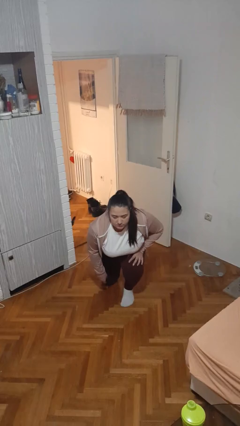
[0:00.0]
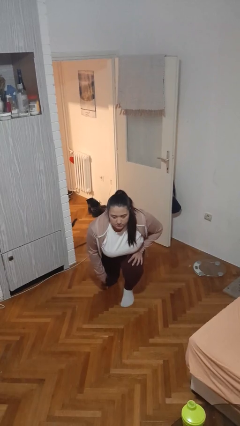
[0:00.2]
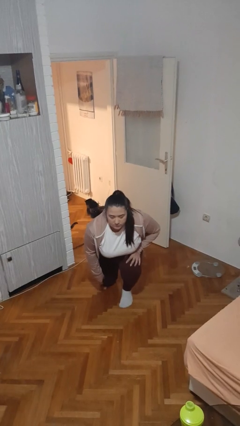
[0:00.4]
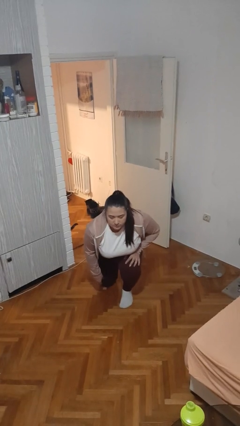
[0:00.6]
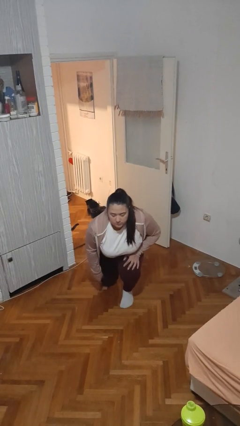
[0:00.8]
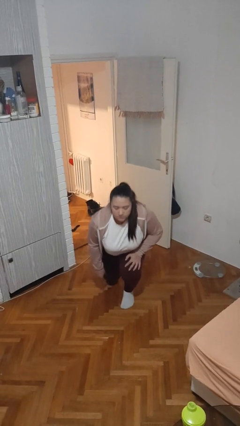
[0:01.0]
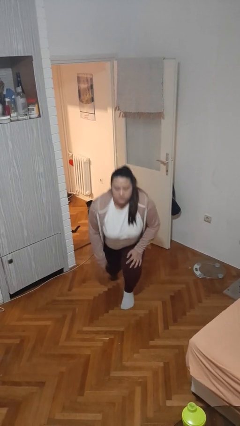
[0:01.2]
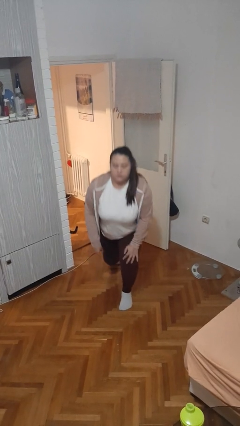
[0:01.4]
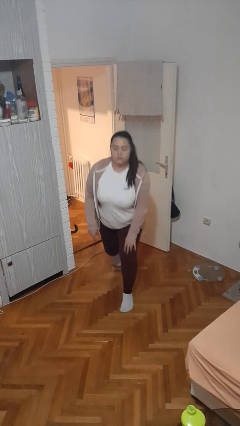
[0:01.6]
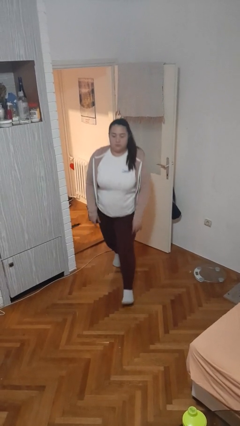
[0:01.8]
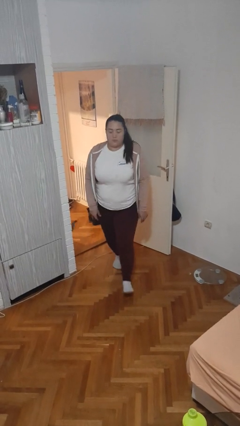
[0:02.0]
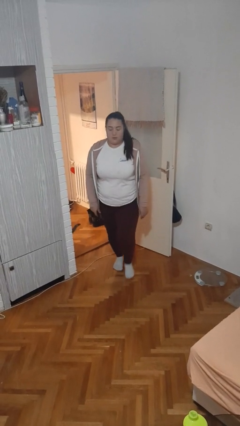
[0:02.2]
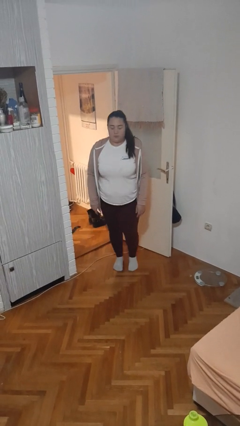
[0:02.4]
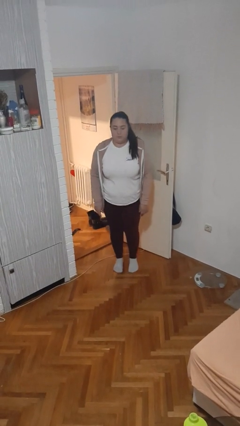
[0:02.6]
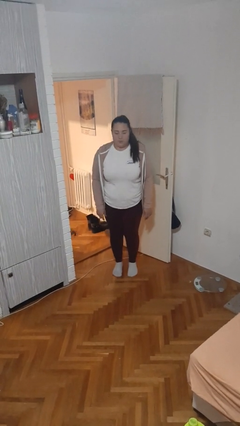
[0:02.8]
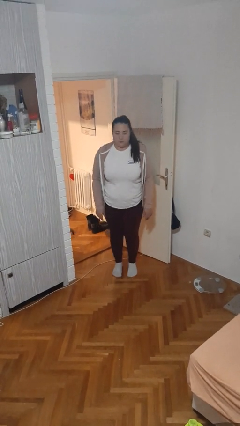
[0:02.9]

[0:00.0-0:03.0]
person stands up from floor

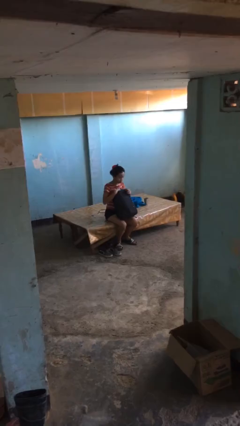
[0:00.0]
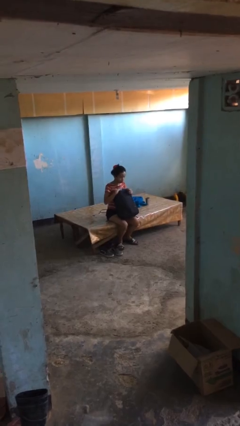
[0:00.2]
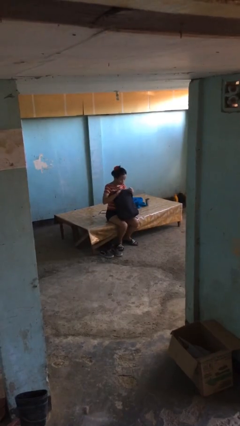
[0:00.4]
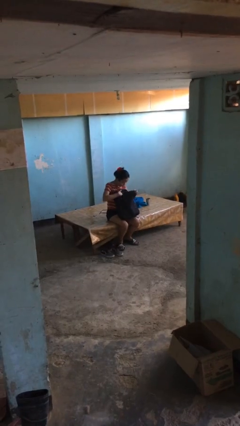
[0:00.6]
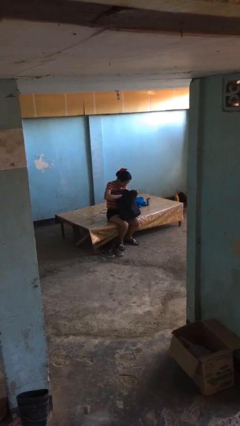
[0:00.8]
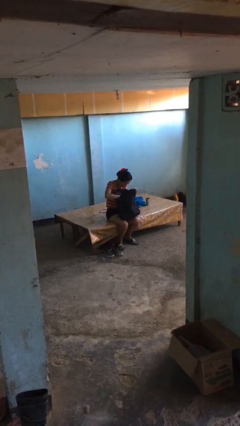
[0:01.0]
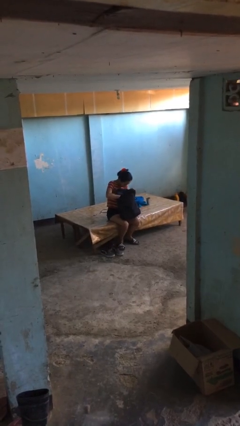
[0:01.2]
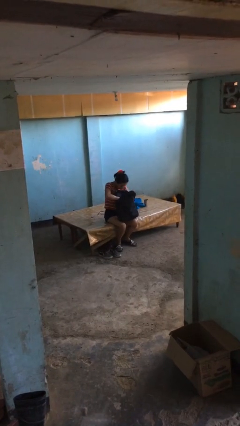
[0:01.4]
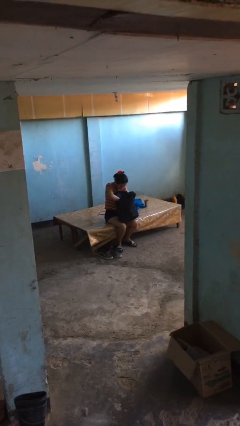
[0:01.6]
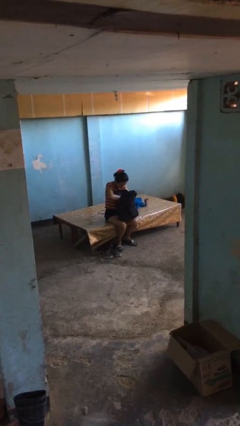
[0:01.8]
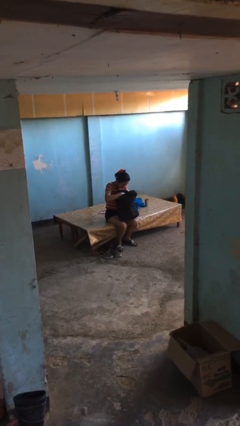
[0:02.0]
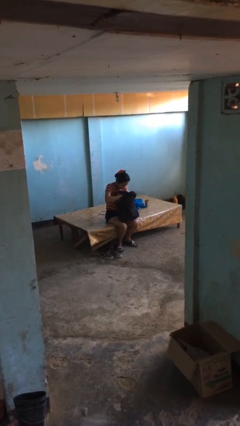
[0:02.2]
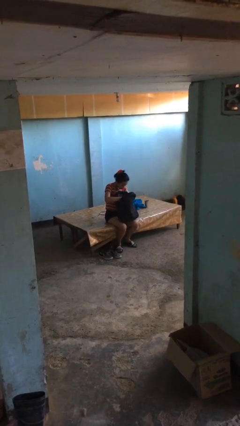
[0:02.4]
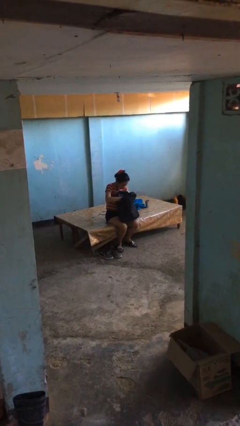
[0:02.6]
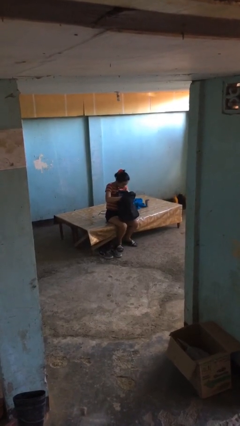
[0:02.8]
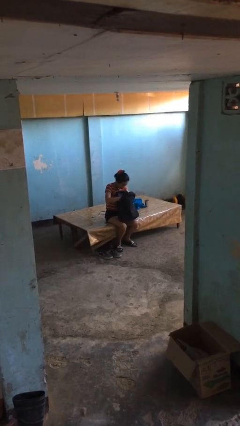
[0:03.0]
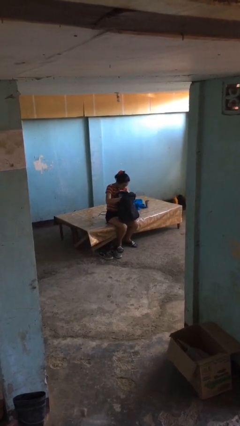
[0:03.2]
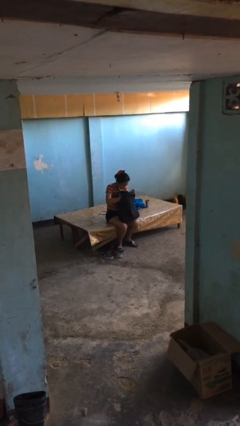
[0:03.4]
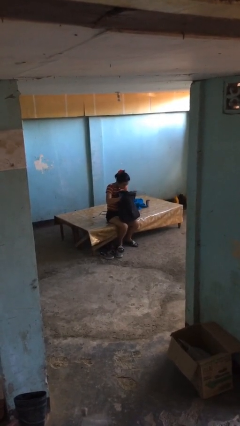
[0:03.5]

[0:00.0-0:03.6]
person searches in backpack

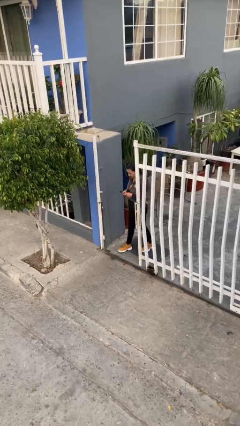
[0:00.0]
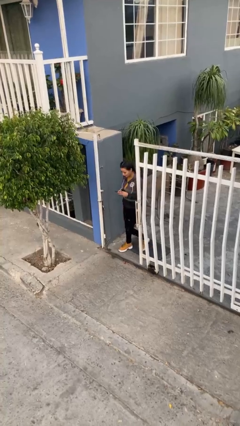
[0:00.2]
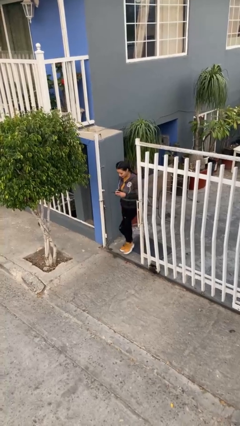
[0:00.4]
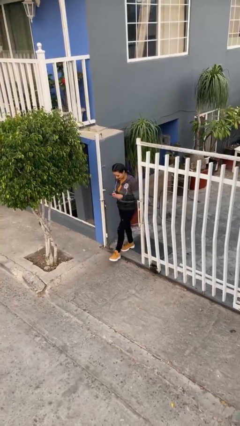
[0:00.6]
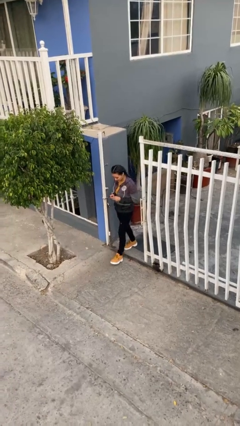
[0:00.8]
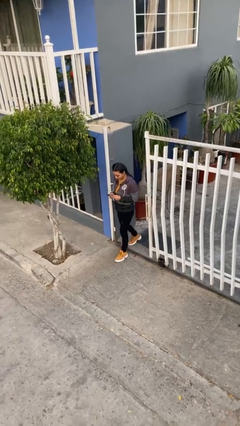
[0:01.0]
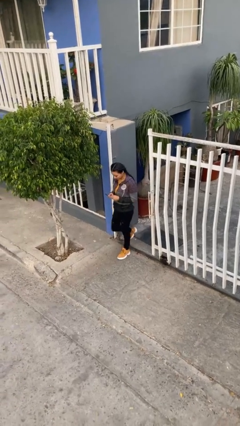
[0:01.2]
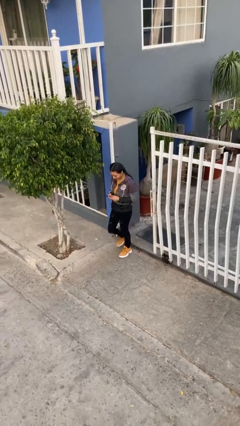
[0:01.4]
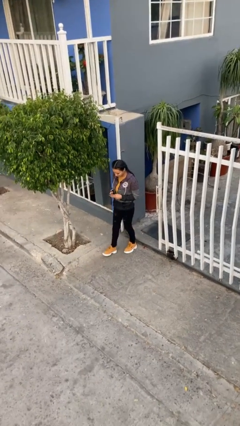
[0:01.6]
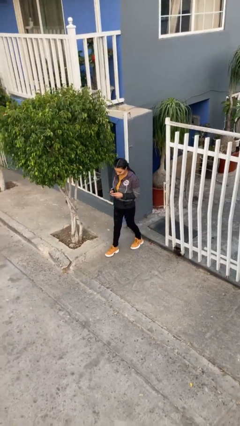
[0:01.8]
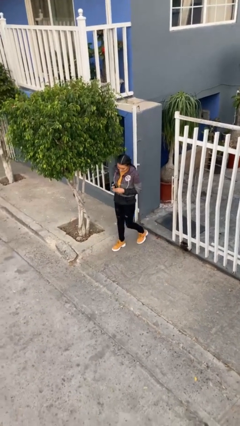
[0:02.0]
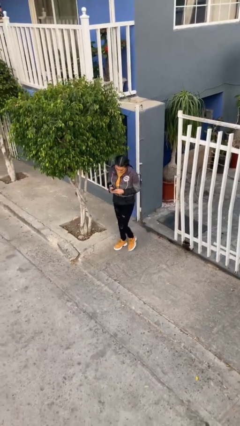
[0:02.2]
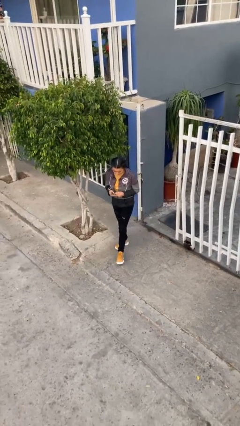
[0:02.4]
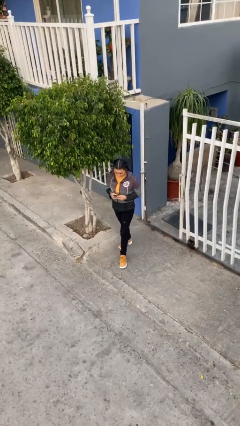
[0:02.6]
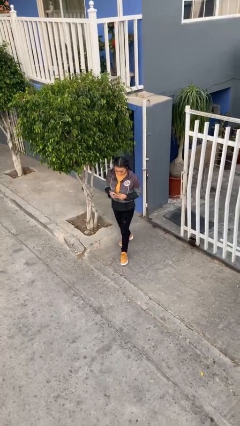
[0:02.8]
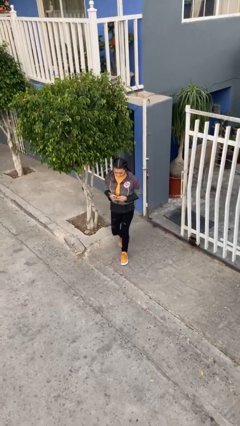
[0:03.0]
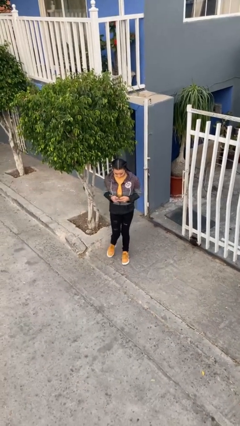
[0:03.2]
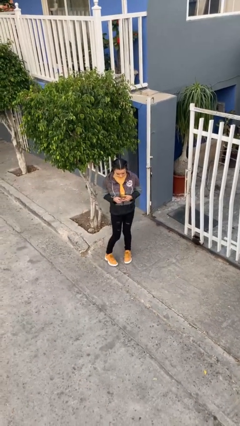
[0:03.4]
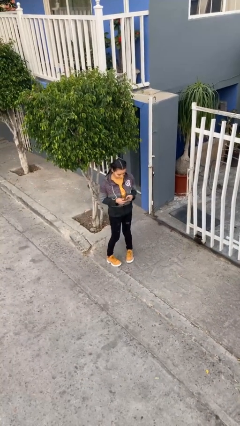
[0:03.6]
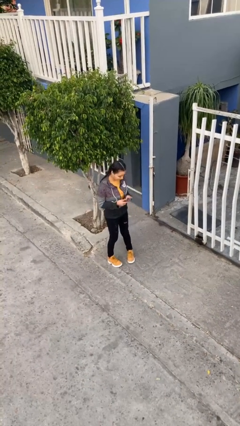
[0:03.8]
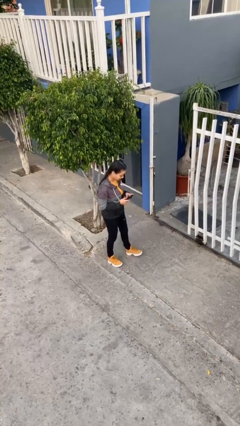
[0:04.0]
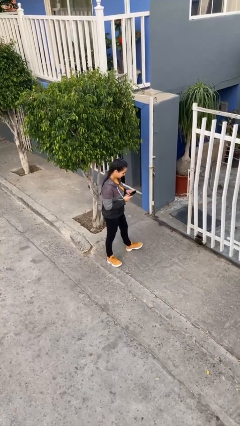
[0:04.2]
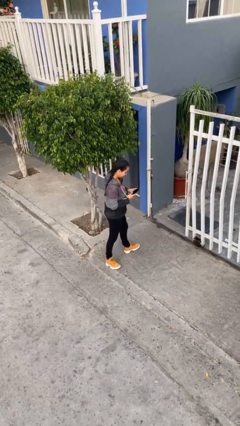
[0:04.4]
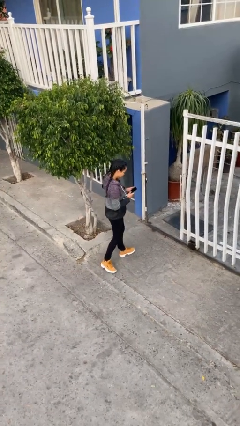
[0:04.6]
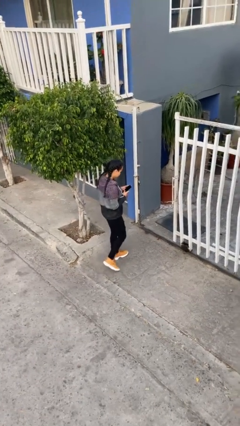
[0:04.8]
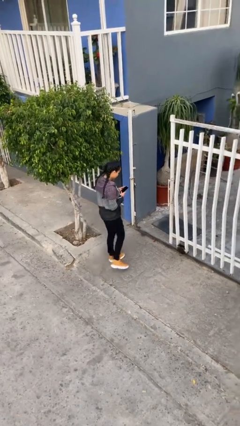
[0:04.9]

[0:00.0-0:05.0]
person enters scene through structure

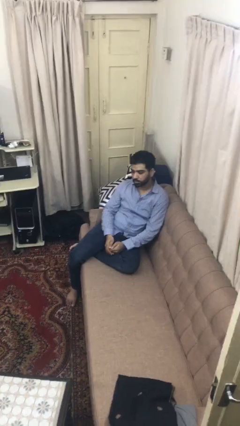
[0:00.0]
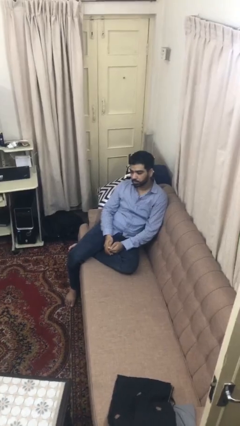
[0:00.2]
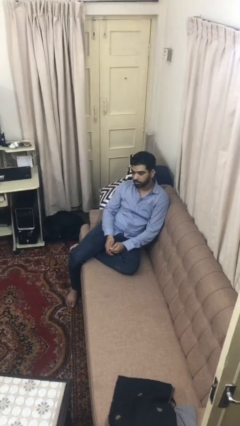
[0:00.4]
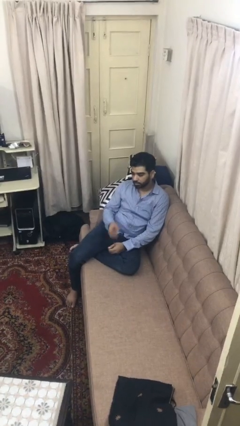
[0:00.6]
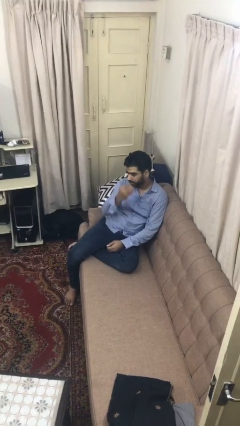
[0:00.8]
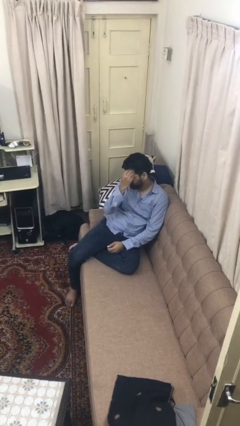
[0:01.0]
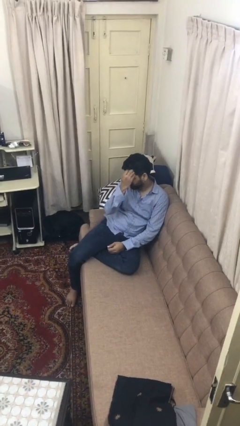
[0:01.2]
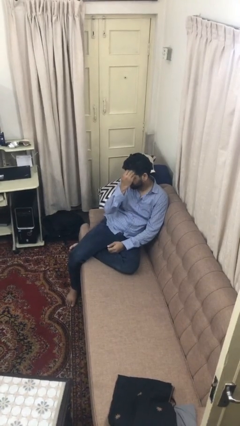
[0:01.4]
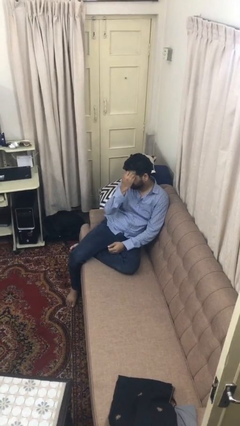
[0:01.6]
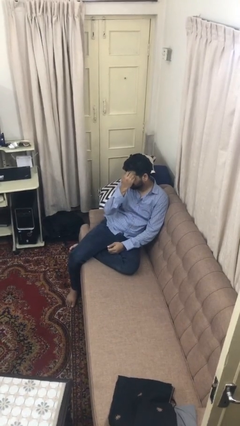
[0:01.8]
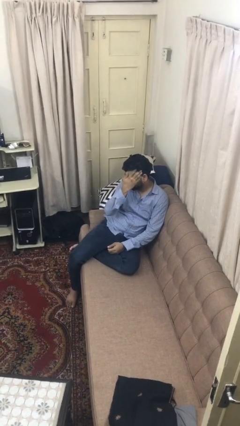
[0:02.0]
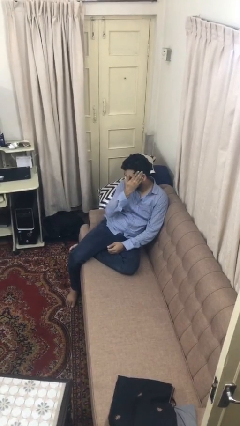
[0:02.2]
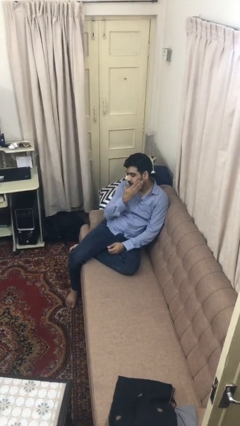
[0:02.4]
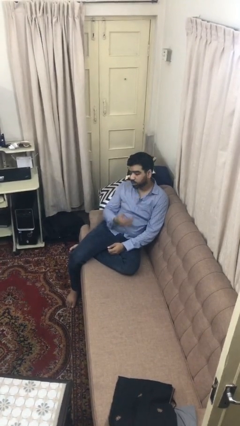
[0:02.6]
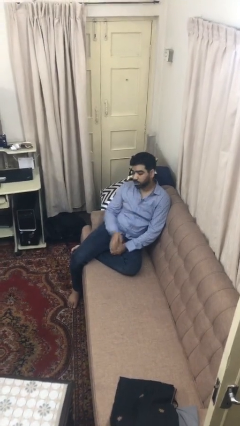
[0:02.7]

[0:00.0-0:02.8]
person scratches face

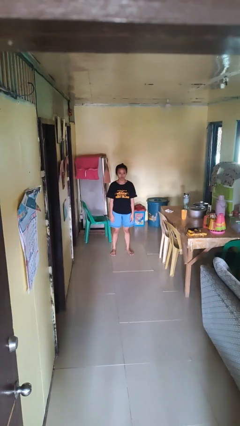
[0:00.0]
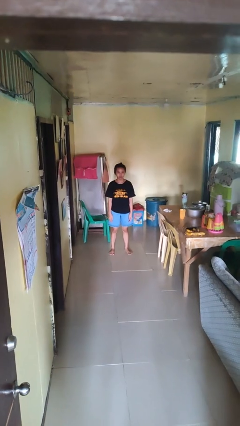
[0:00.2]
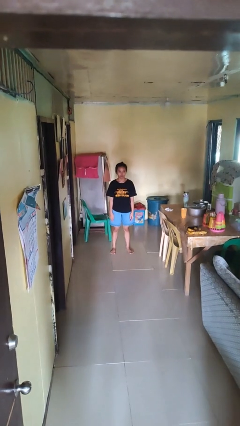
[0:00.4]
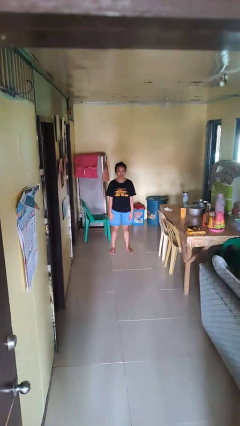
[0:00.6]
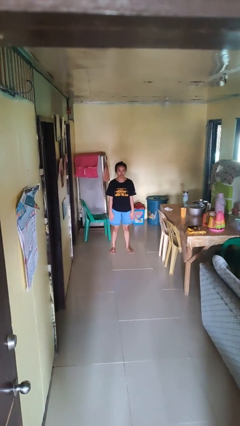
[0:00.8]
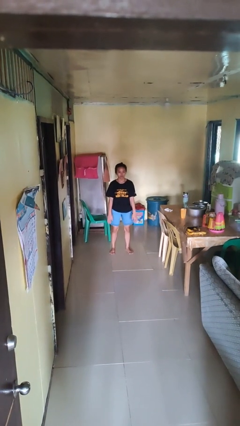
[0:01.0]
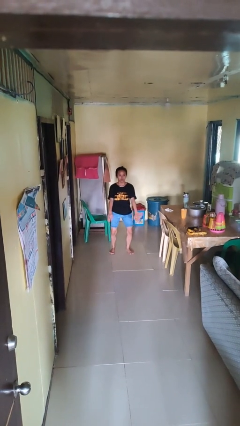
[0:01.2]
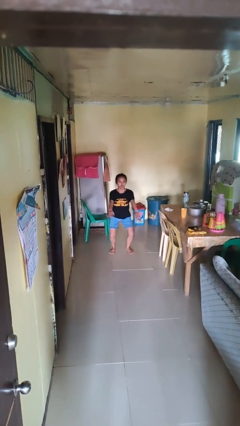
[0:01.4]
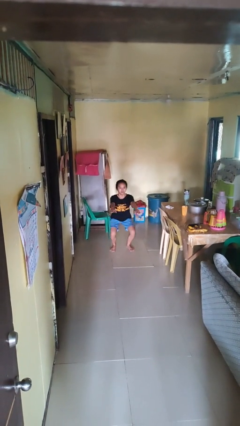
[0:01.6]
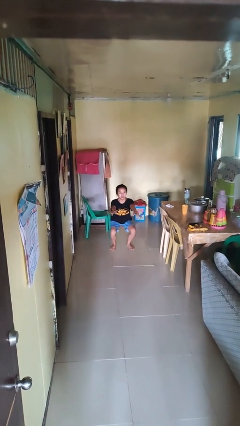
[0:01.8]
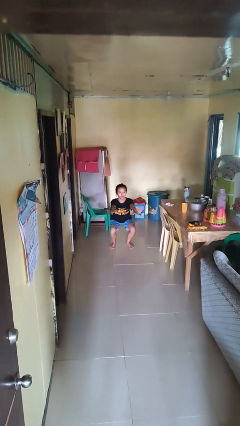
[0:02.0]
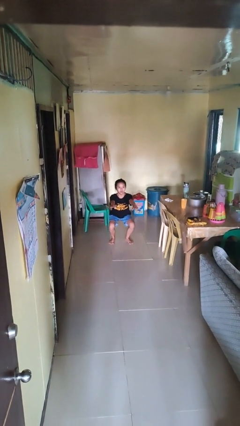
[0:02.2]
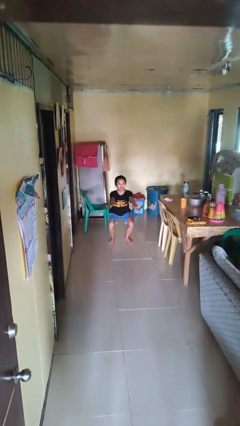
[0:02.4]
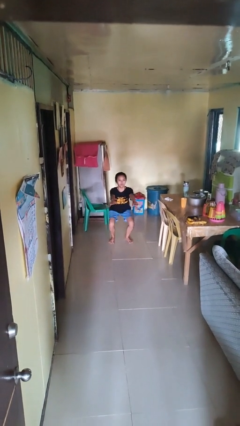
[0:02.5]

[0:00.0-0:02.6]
person squats

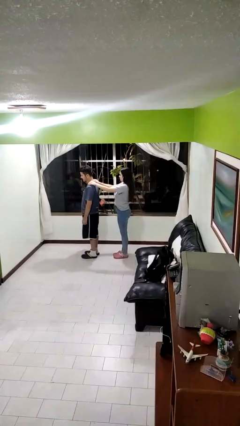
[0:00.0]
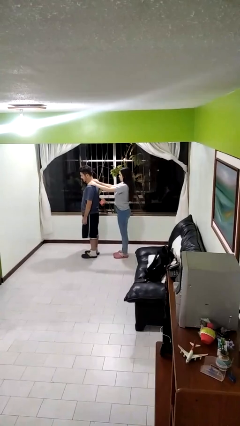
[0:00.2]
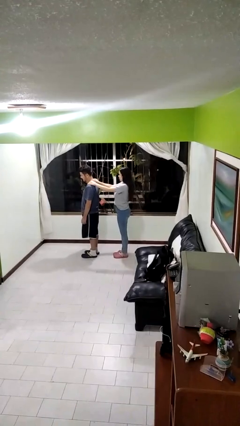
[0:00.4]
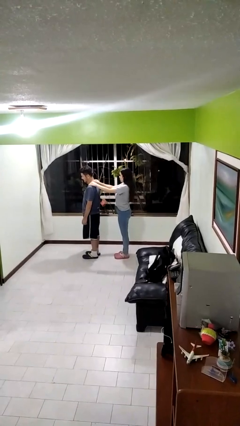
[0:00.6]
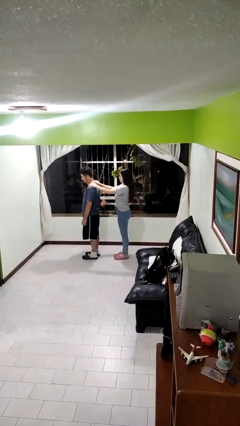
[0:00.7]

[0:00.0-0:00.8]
person grabs person by shoulder
